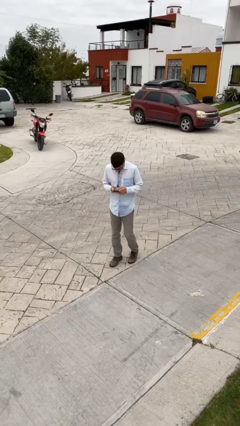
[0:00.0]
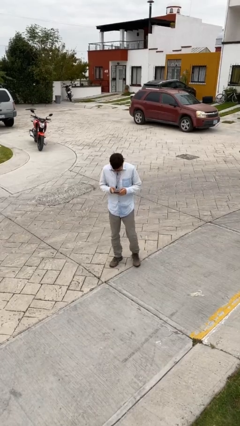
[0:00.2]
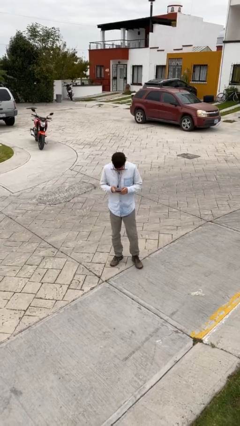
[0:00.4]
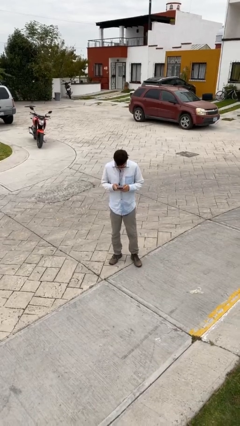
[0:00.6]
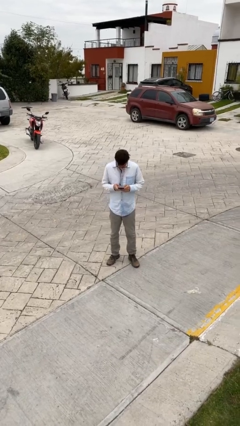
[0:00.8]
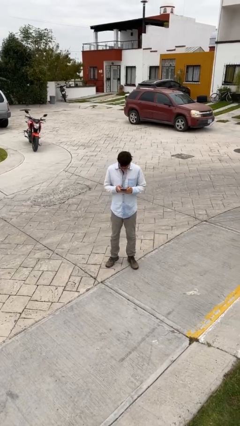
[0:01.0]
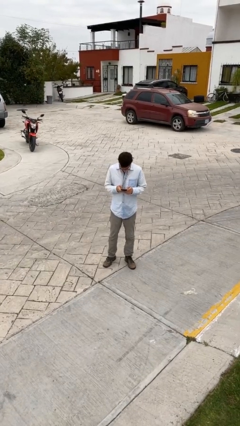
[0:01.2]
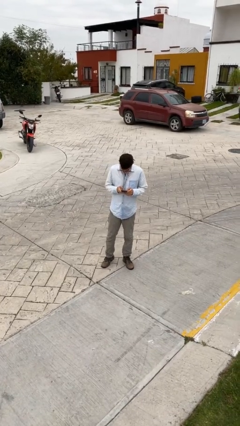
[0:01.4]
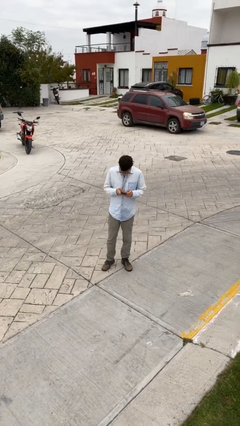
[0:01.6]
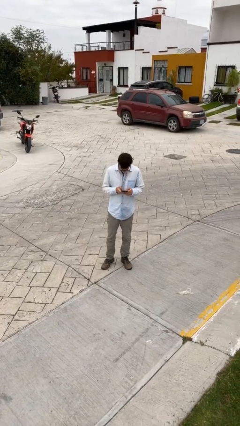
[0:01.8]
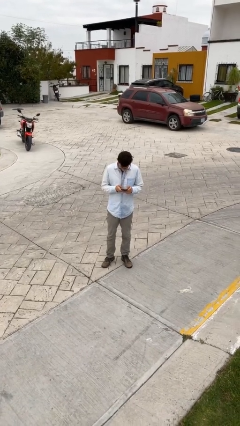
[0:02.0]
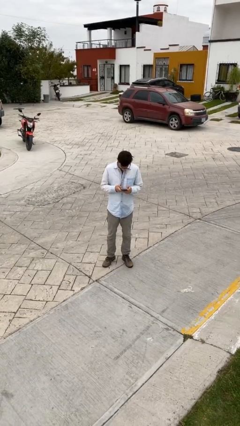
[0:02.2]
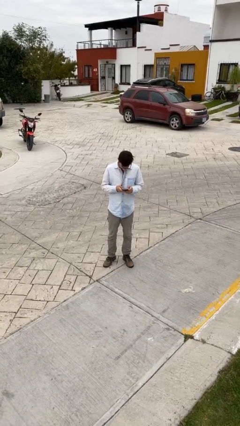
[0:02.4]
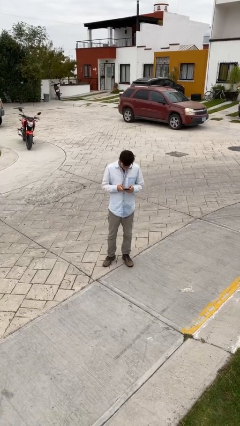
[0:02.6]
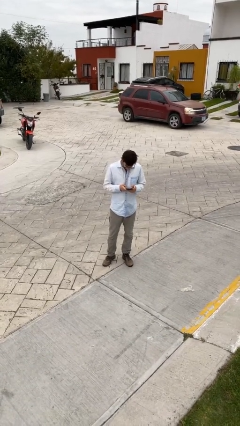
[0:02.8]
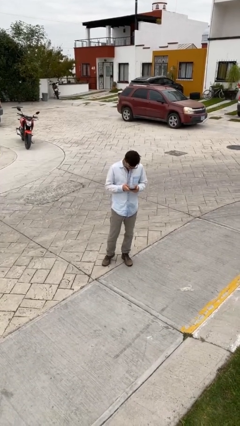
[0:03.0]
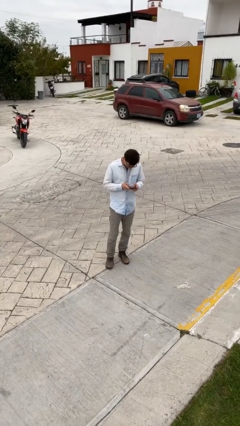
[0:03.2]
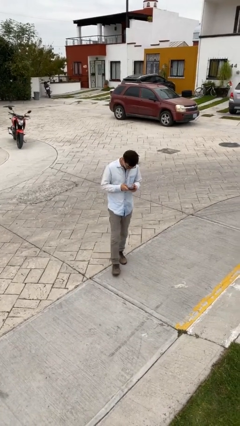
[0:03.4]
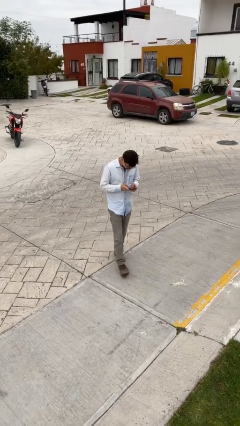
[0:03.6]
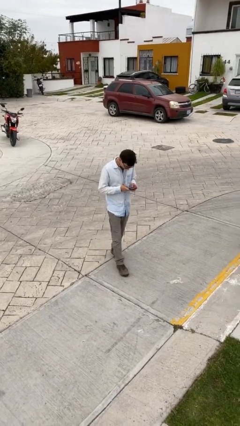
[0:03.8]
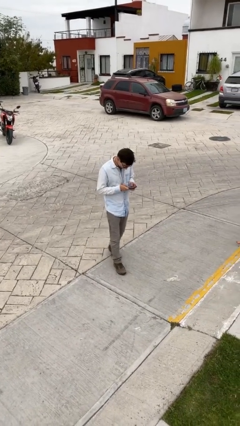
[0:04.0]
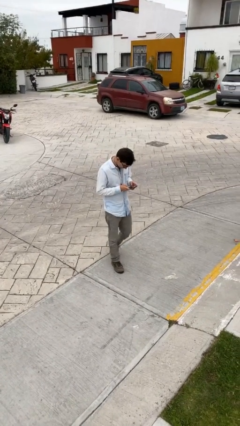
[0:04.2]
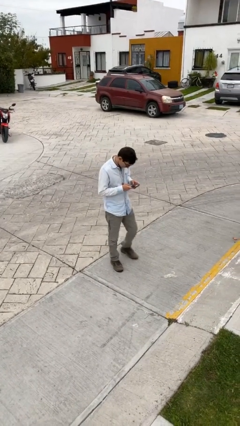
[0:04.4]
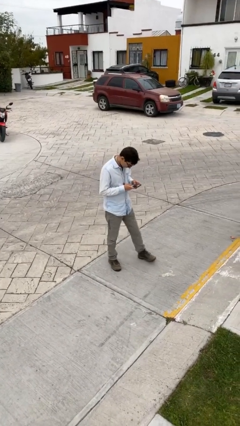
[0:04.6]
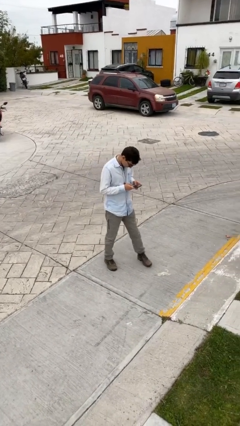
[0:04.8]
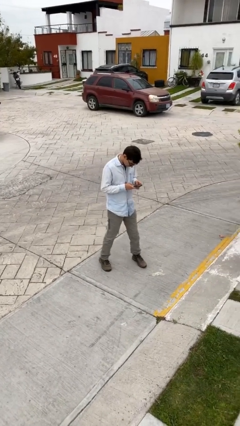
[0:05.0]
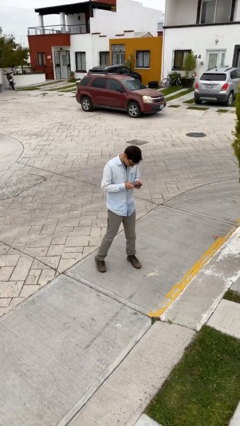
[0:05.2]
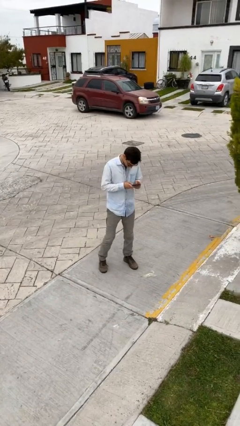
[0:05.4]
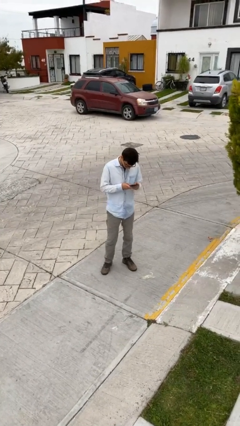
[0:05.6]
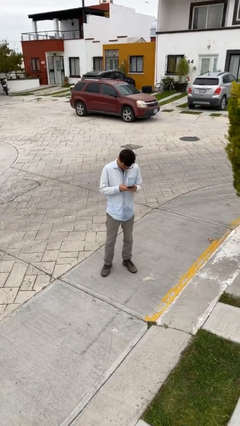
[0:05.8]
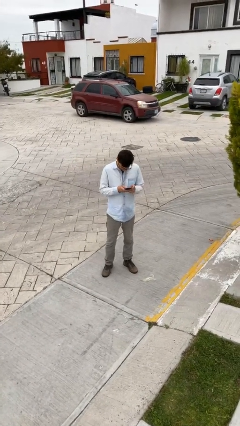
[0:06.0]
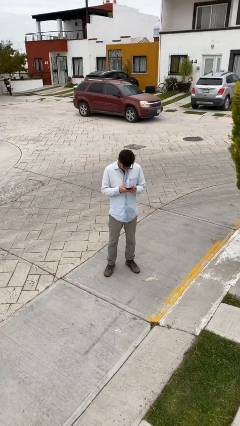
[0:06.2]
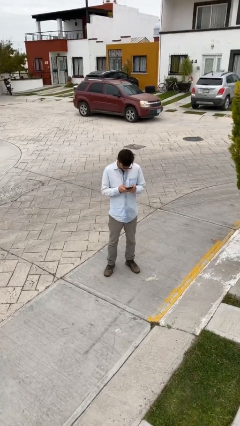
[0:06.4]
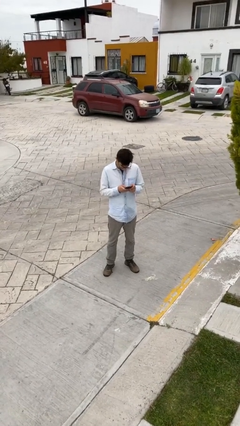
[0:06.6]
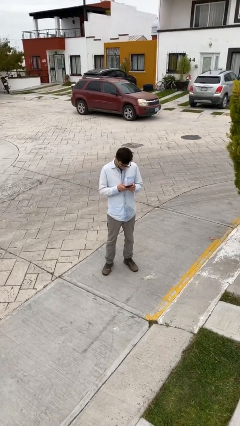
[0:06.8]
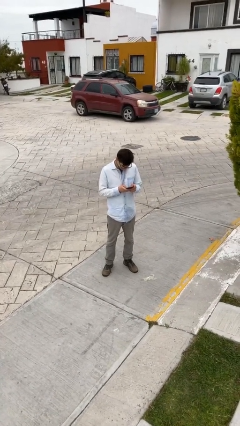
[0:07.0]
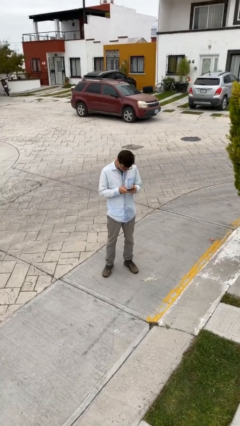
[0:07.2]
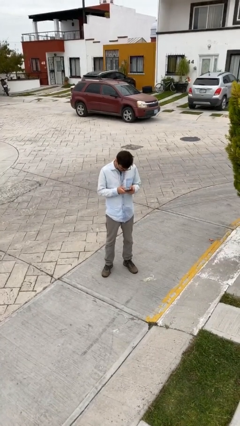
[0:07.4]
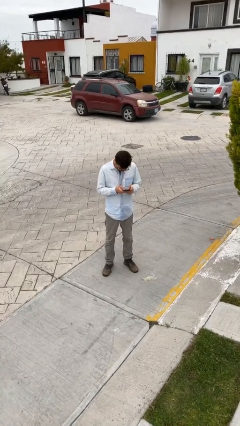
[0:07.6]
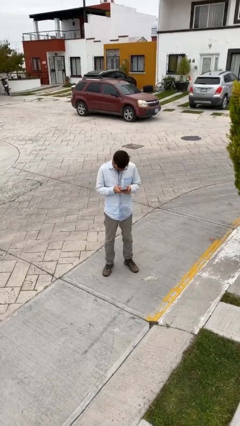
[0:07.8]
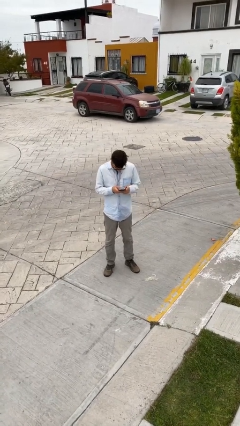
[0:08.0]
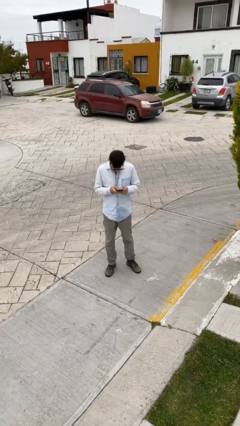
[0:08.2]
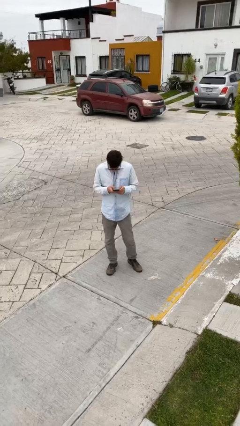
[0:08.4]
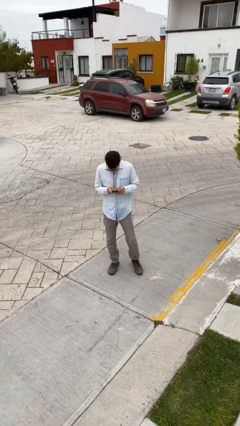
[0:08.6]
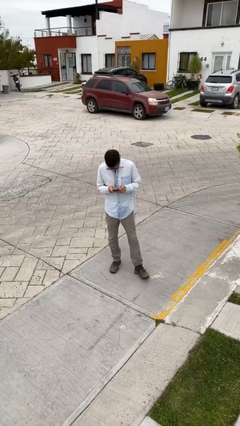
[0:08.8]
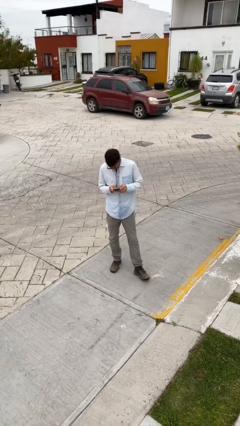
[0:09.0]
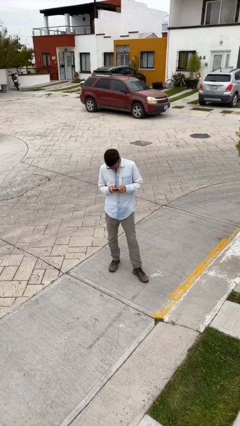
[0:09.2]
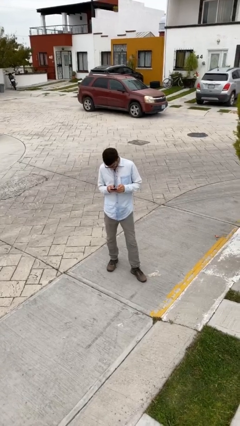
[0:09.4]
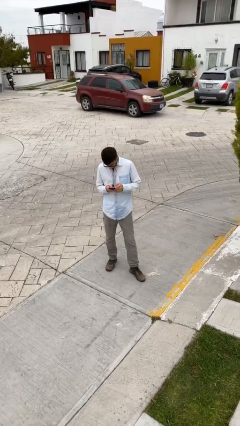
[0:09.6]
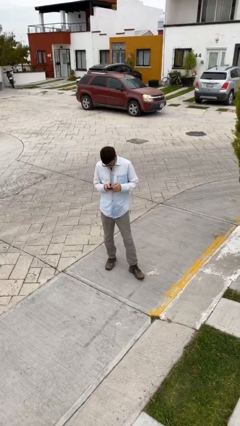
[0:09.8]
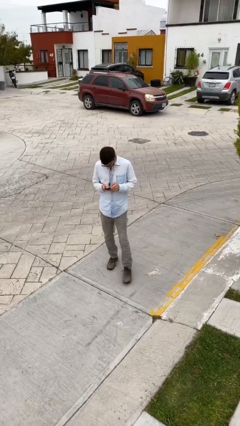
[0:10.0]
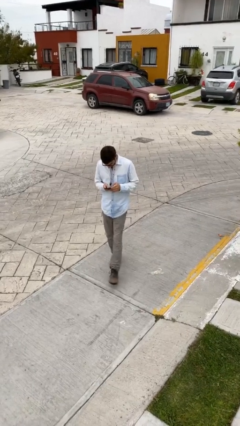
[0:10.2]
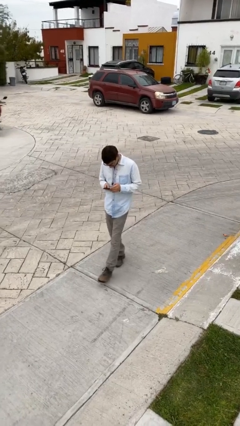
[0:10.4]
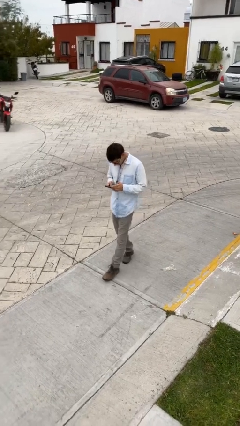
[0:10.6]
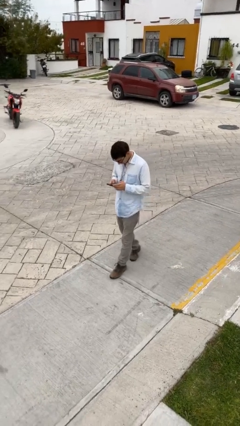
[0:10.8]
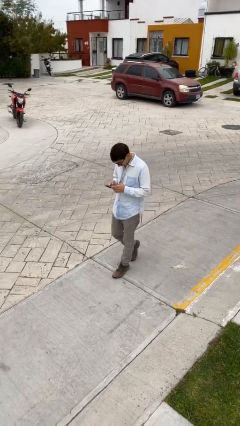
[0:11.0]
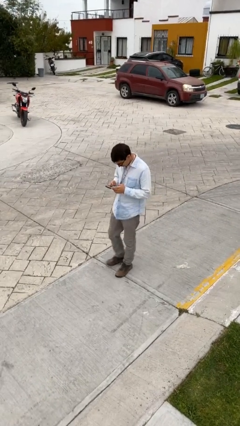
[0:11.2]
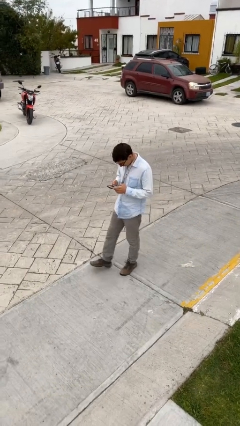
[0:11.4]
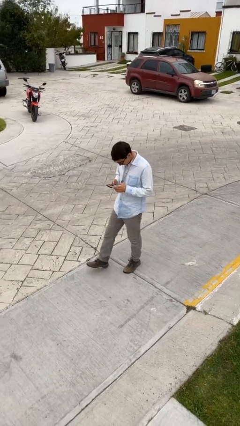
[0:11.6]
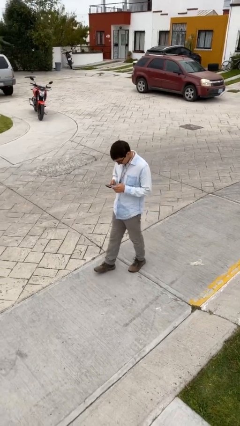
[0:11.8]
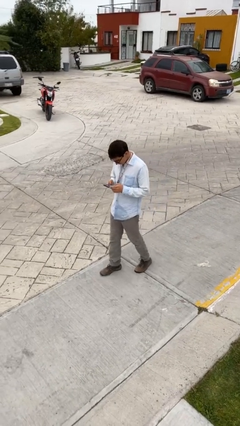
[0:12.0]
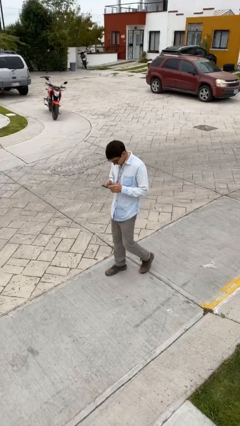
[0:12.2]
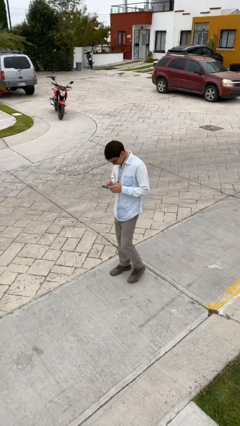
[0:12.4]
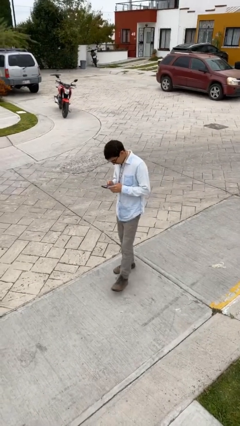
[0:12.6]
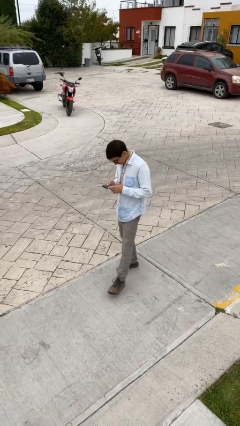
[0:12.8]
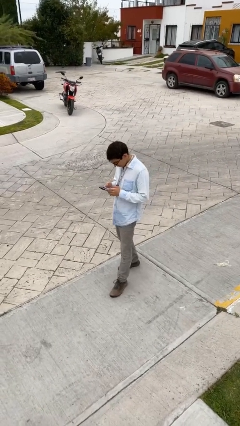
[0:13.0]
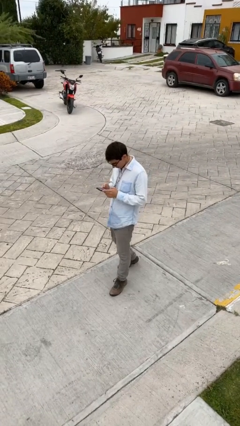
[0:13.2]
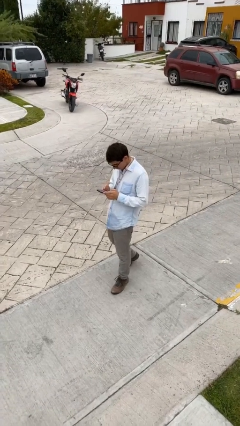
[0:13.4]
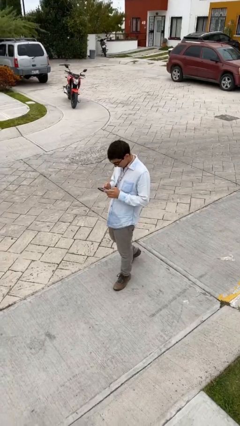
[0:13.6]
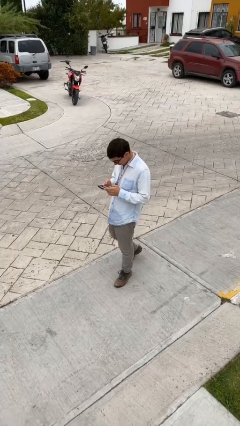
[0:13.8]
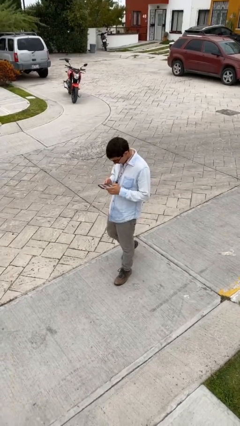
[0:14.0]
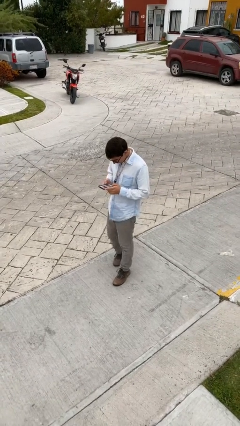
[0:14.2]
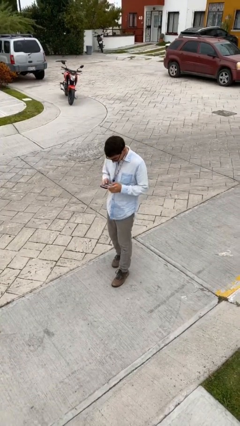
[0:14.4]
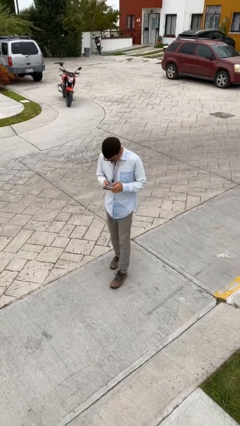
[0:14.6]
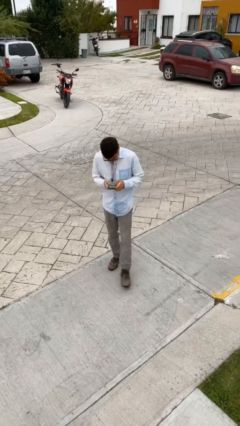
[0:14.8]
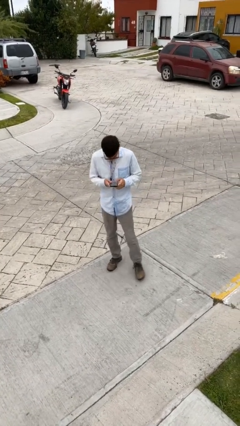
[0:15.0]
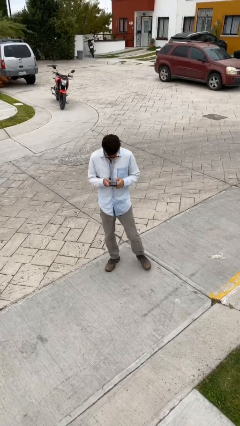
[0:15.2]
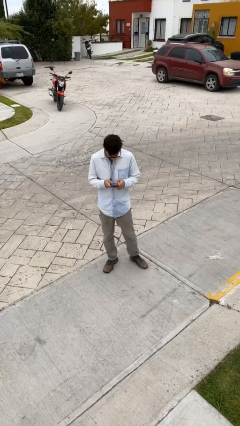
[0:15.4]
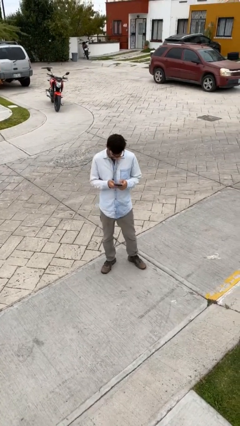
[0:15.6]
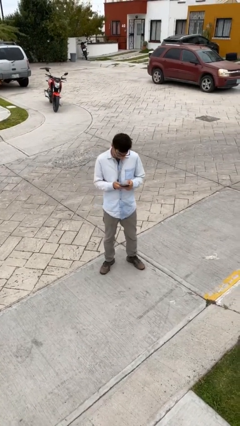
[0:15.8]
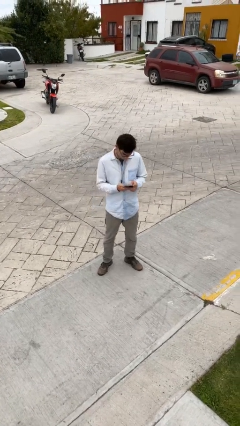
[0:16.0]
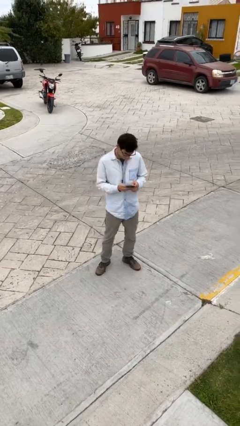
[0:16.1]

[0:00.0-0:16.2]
person texts on phone

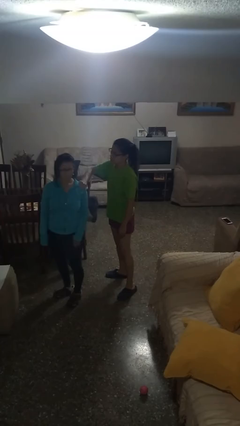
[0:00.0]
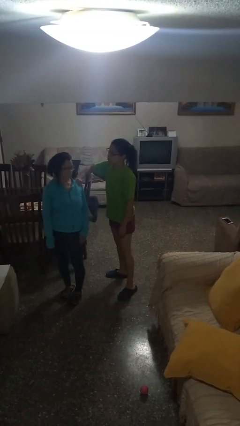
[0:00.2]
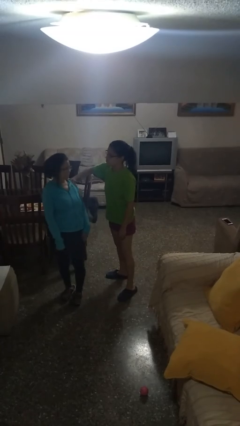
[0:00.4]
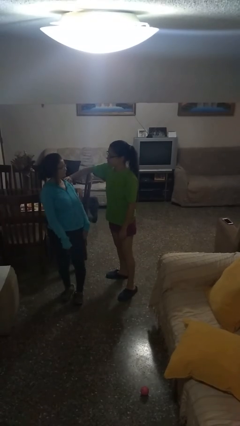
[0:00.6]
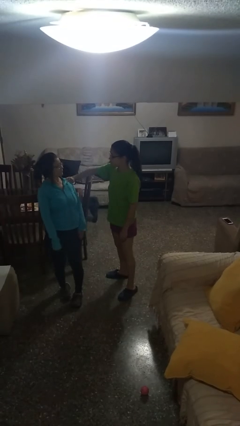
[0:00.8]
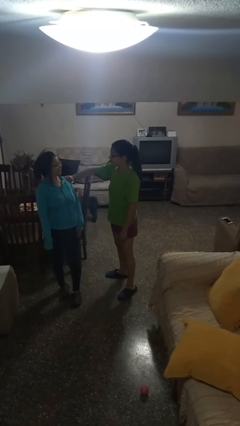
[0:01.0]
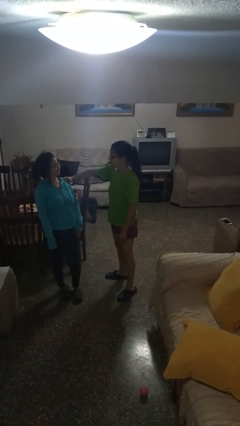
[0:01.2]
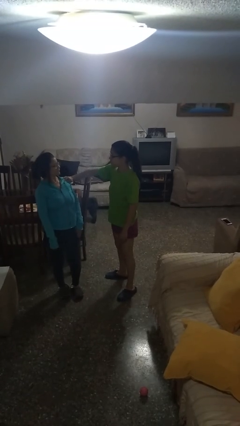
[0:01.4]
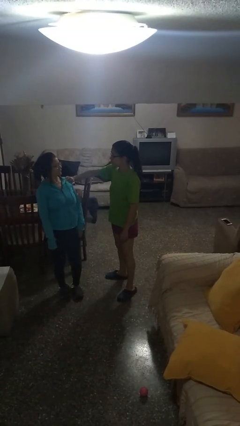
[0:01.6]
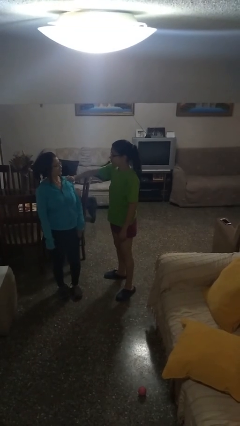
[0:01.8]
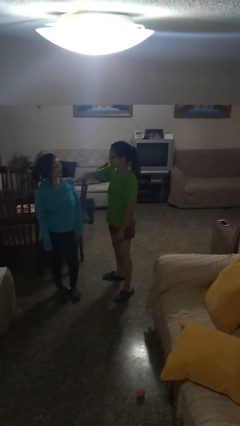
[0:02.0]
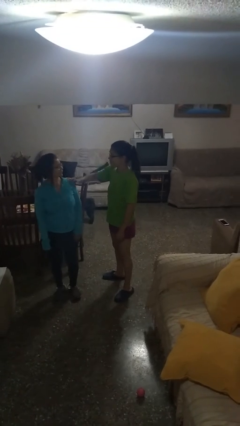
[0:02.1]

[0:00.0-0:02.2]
person spins person around
